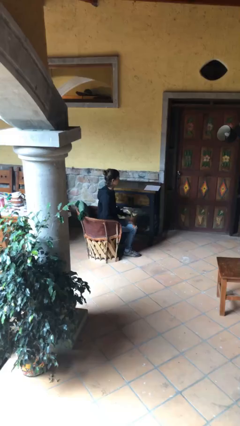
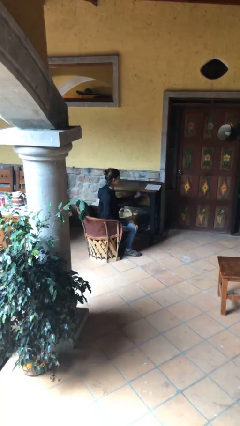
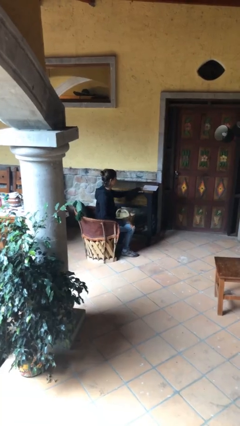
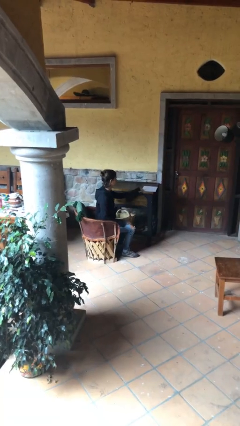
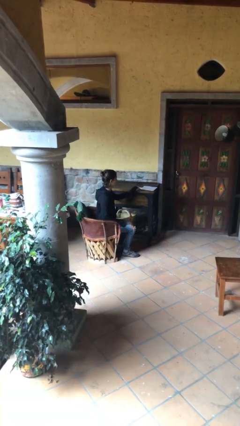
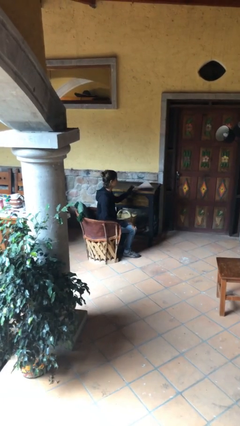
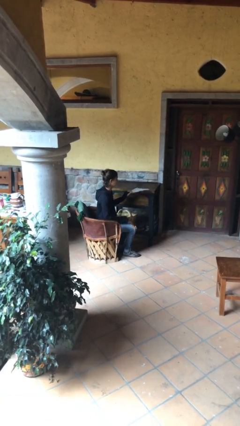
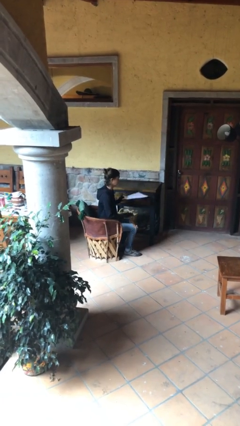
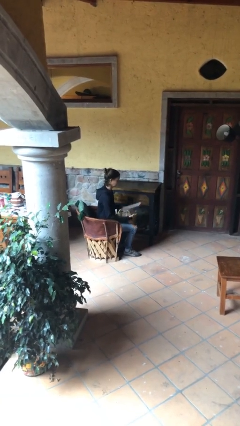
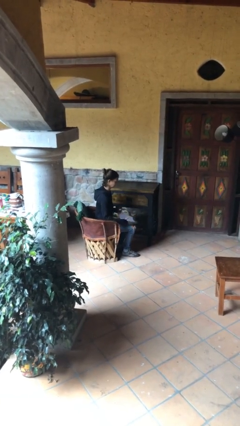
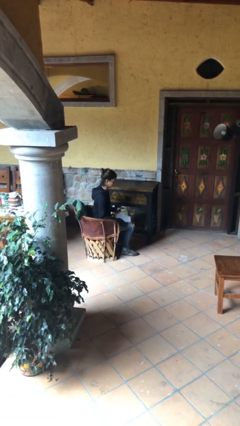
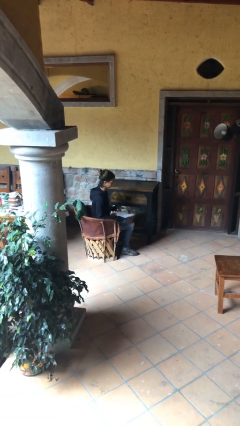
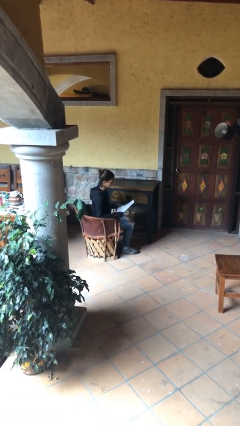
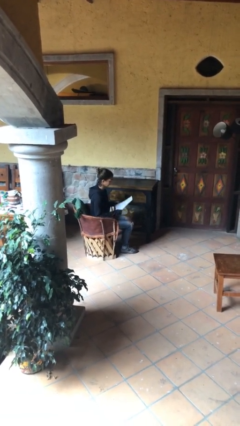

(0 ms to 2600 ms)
person picks up object from table

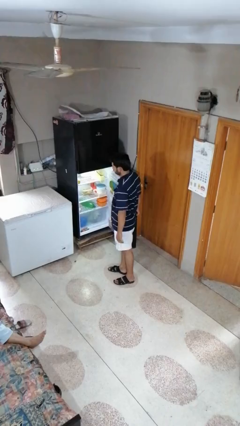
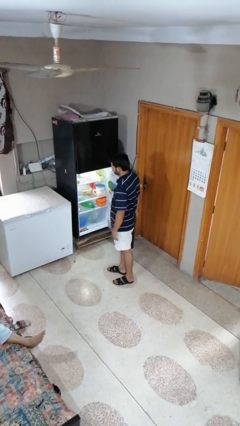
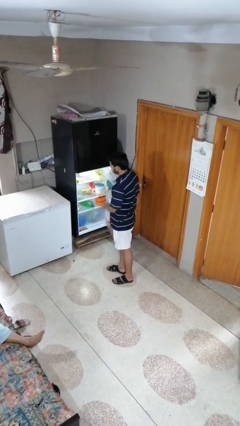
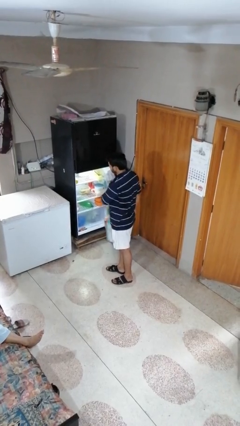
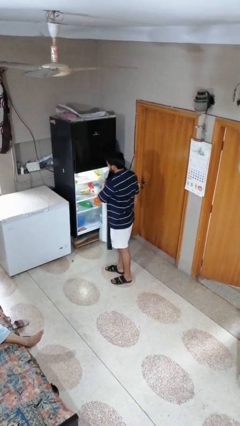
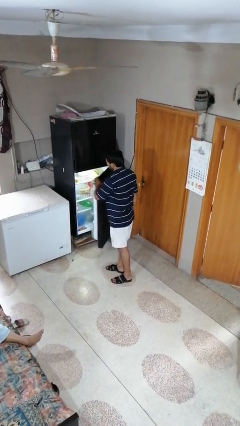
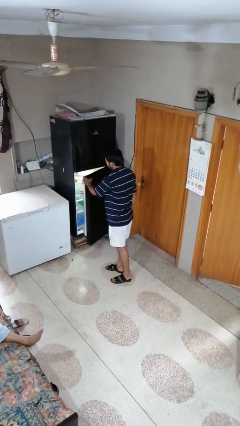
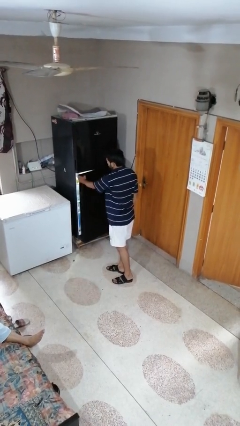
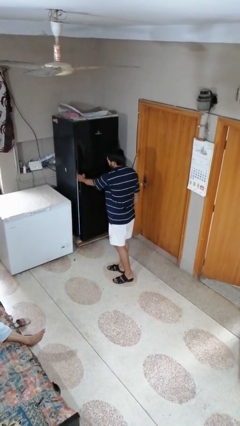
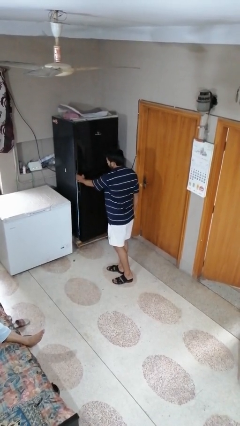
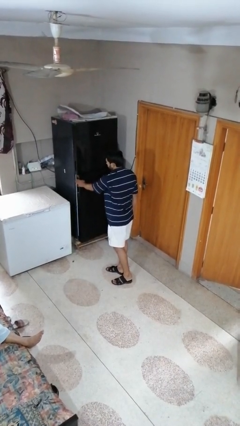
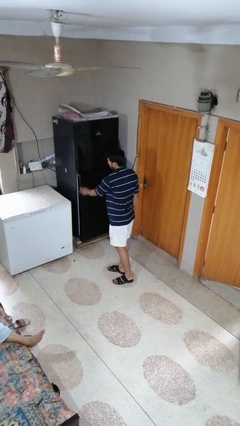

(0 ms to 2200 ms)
person closes refrigerator

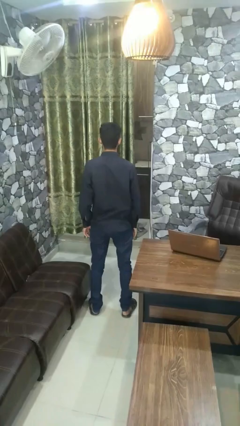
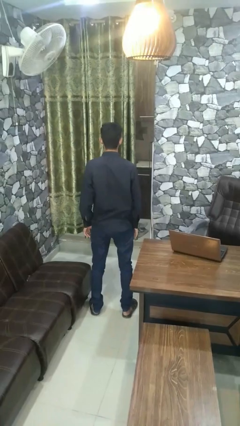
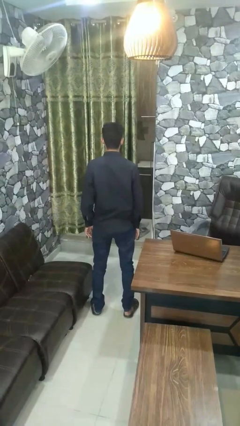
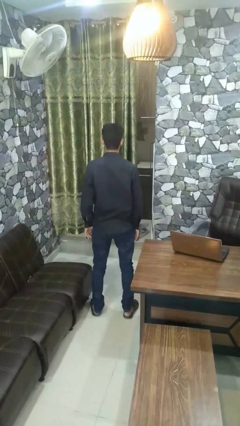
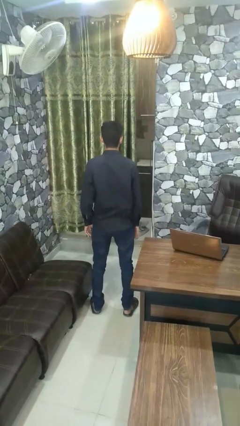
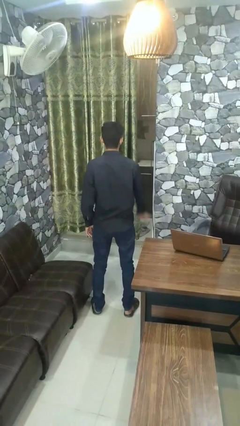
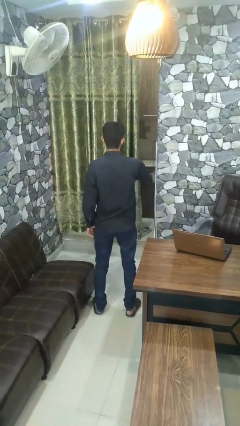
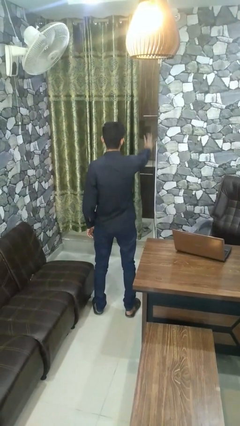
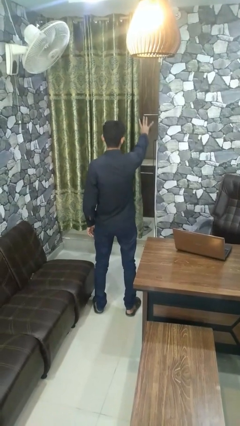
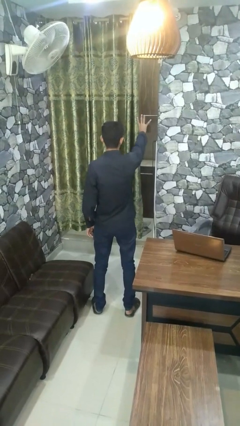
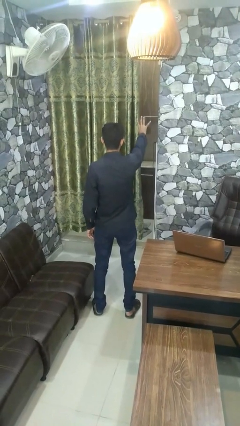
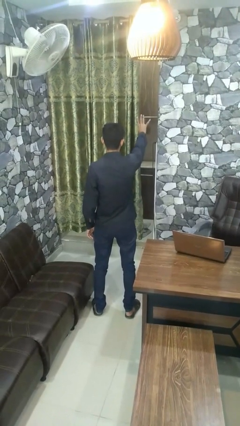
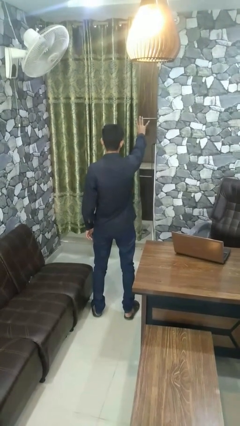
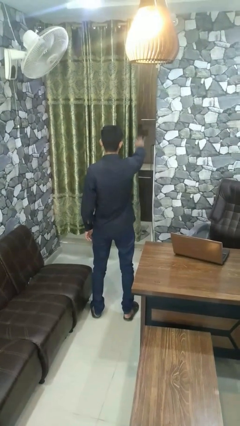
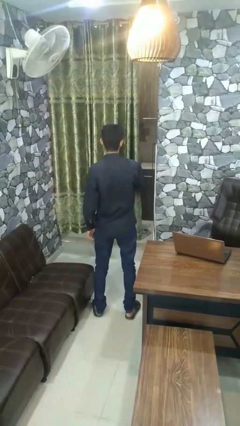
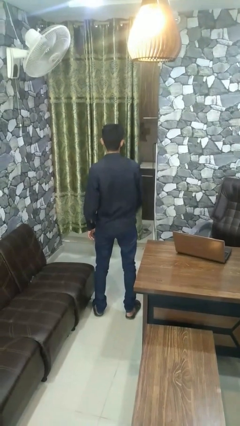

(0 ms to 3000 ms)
person gestures number four

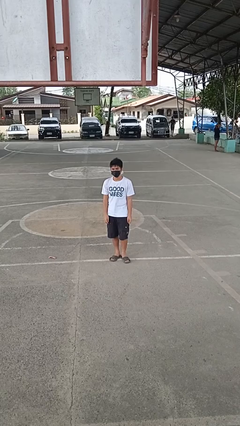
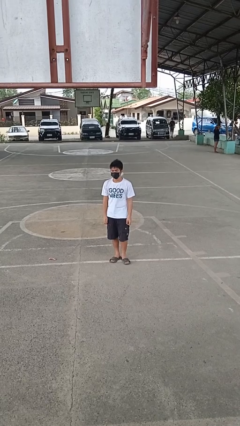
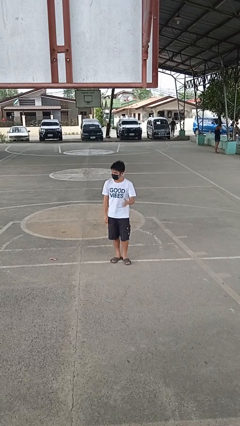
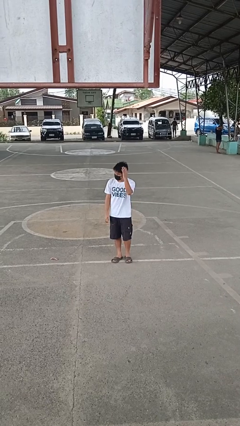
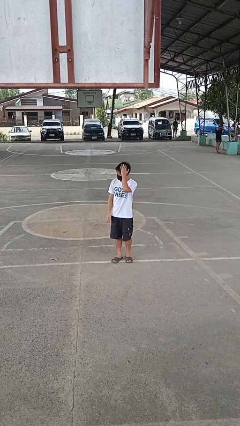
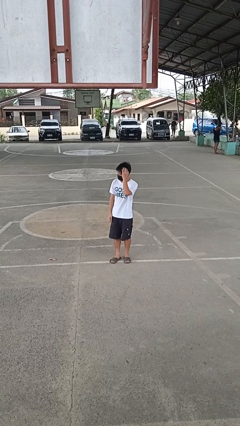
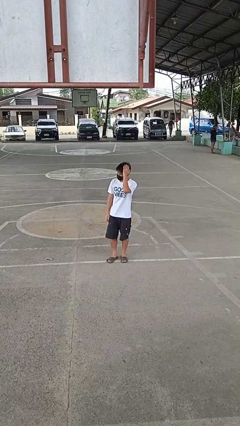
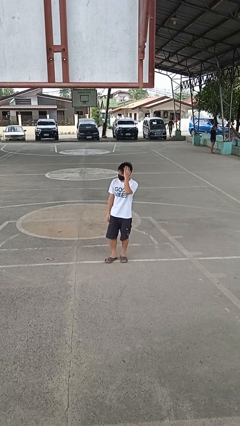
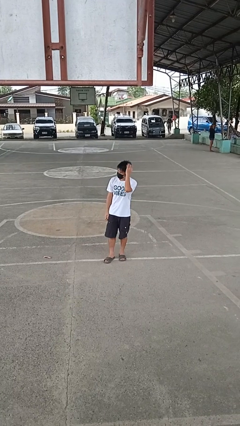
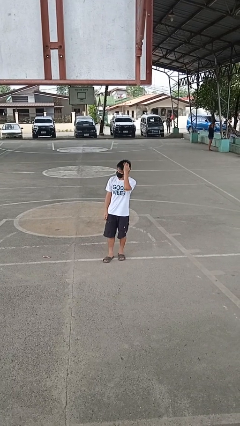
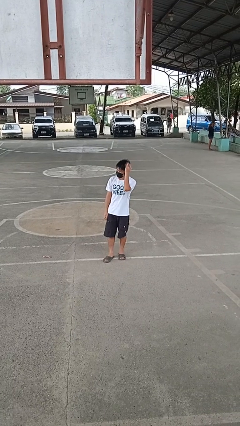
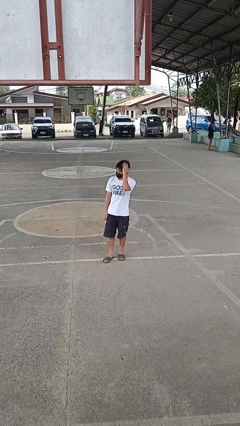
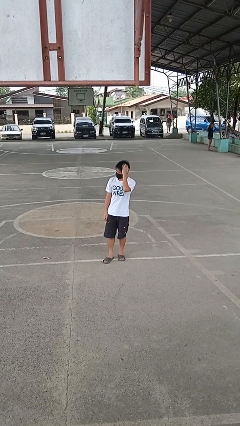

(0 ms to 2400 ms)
person pats head

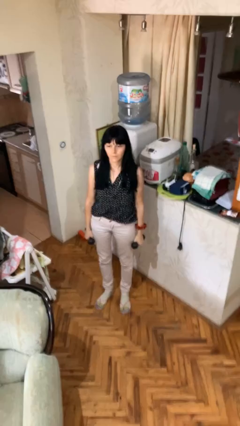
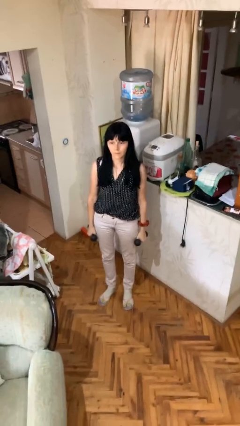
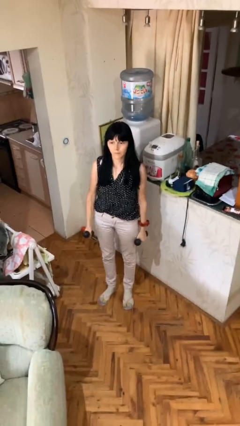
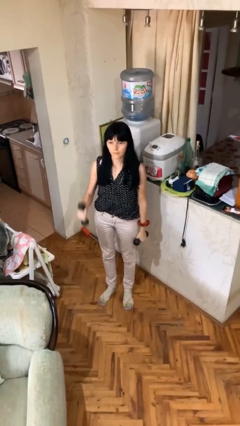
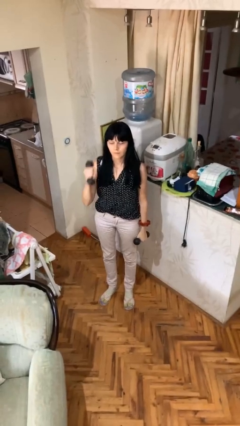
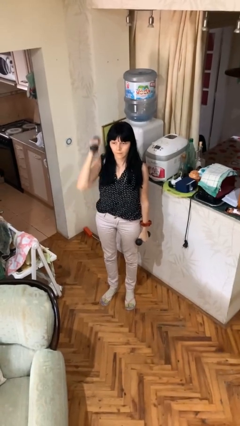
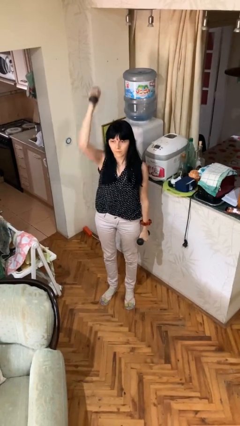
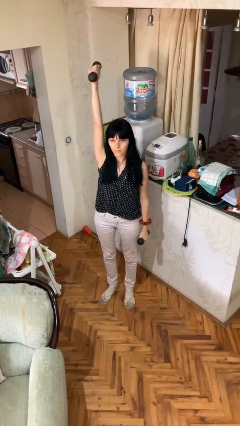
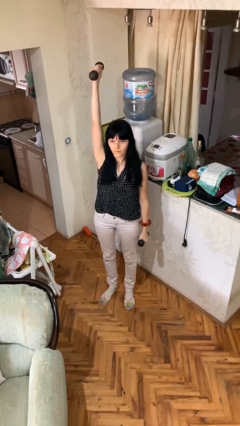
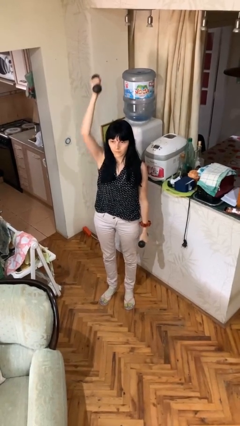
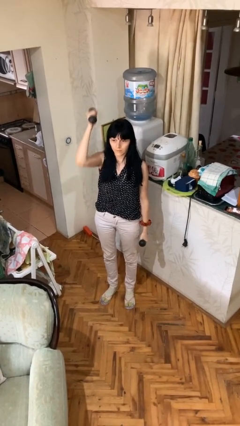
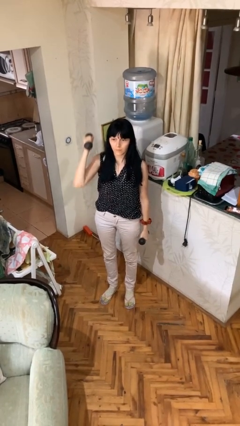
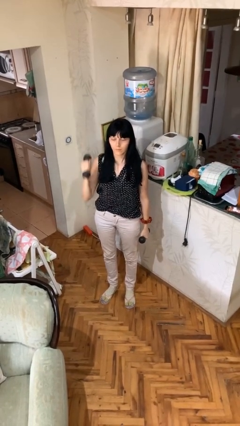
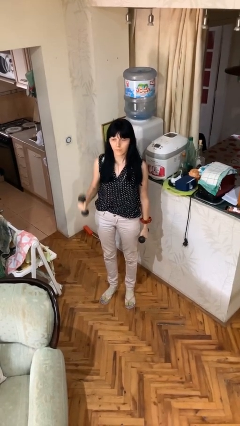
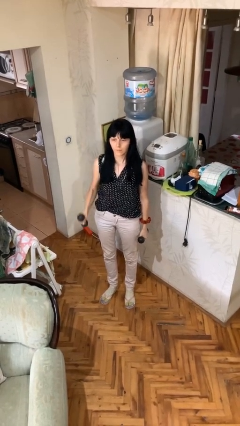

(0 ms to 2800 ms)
person lifts dumbbells

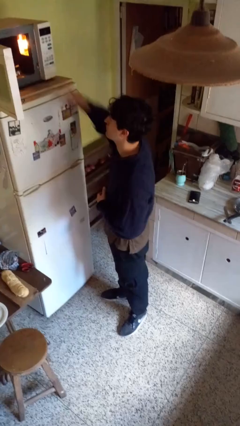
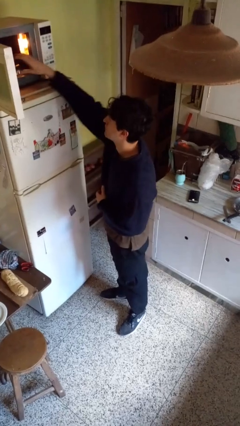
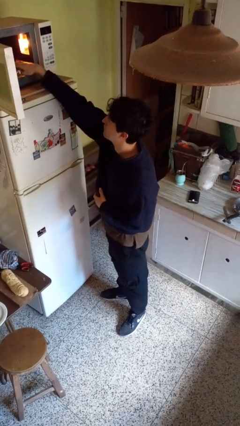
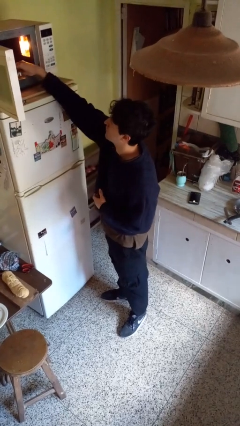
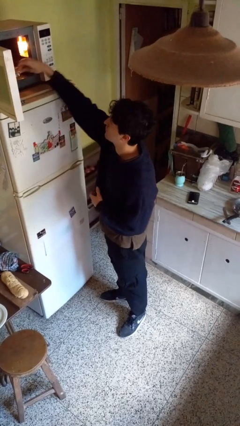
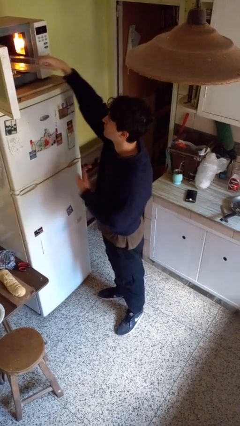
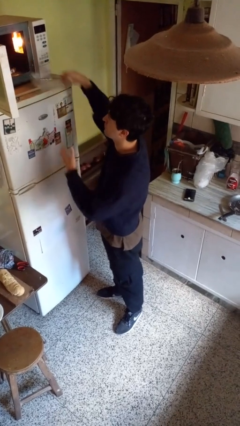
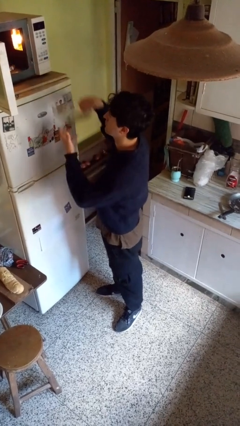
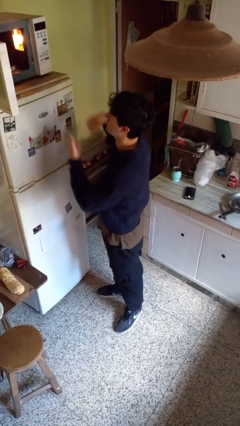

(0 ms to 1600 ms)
person takes object from microwave

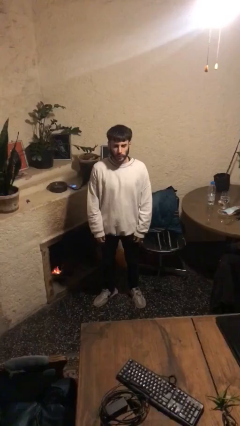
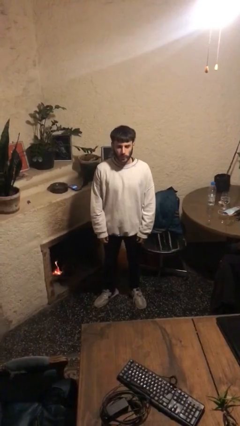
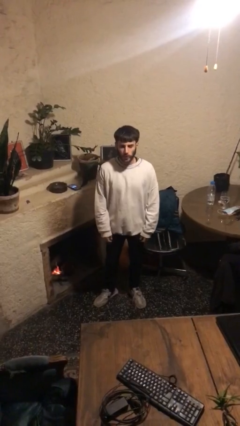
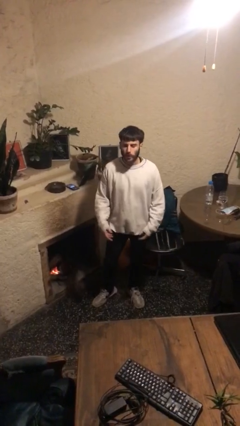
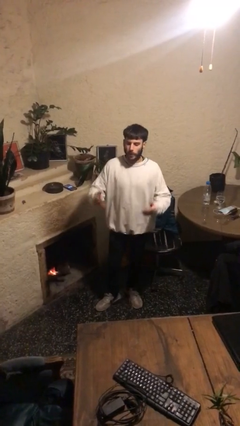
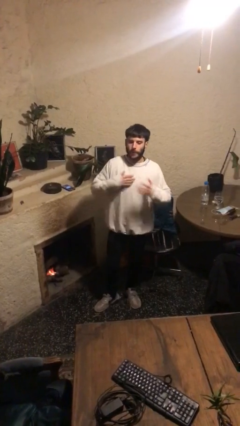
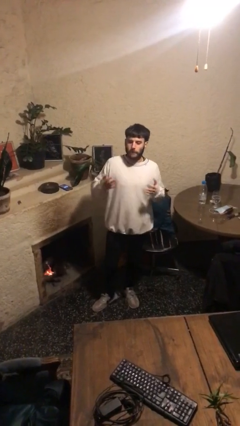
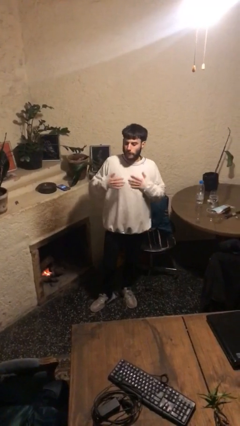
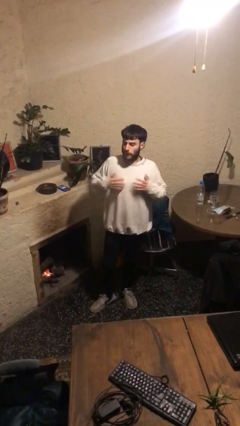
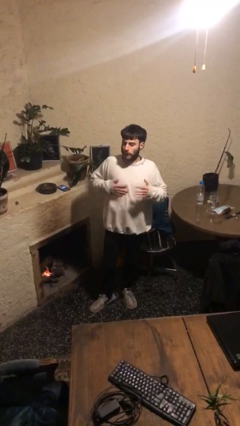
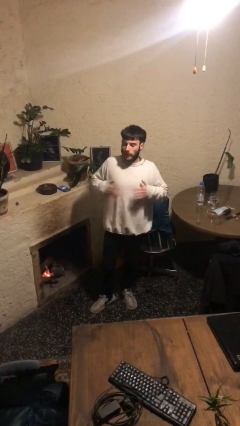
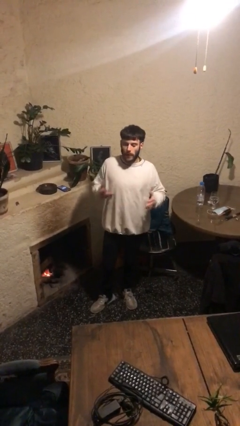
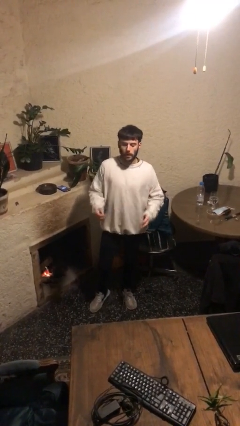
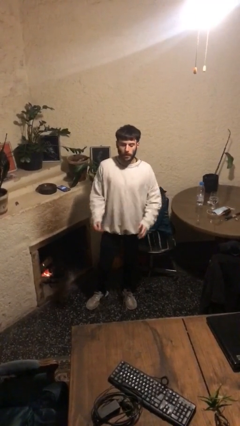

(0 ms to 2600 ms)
person drums on chest
